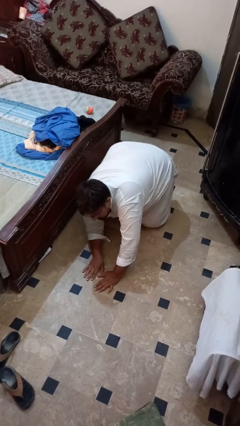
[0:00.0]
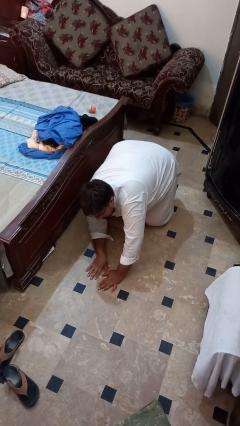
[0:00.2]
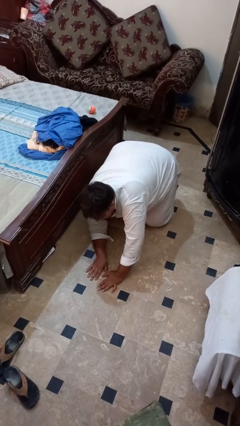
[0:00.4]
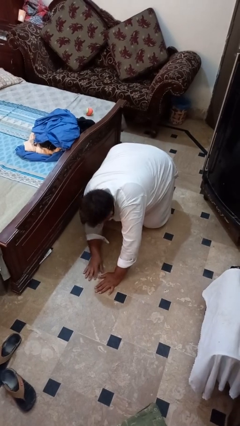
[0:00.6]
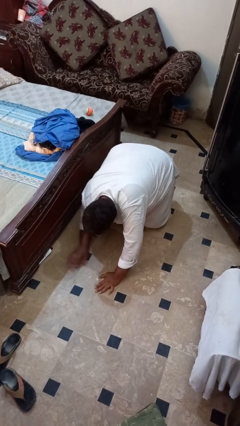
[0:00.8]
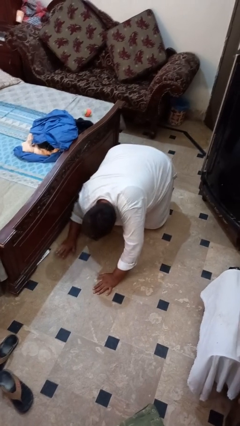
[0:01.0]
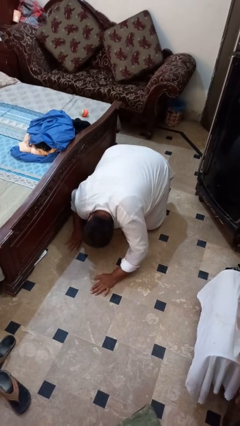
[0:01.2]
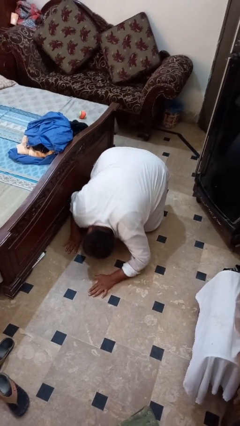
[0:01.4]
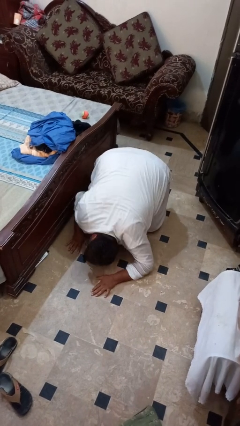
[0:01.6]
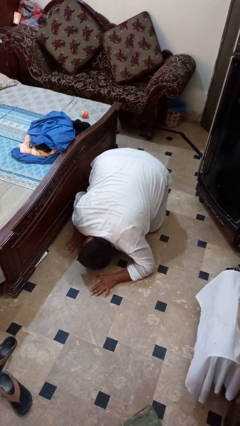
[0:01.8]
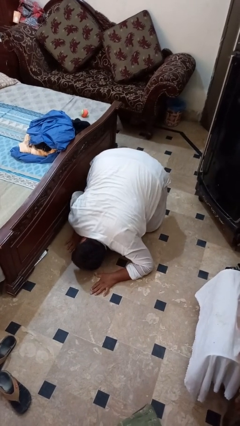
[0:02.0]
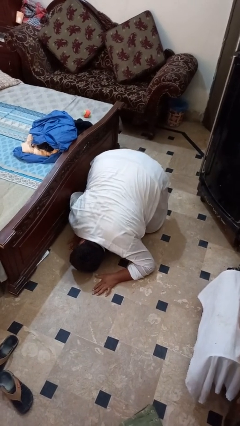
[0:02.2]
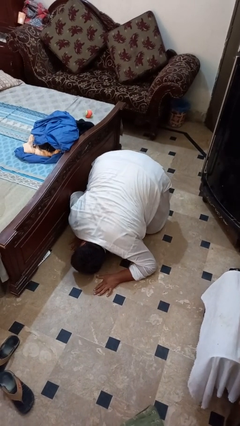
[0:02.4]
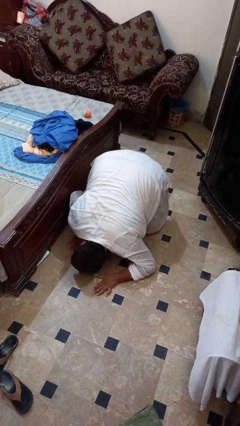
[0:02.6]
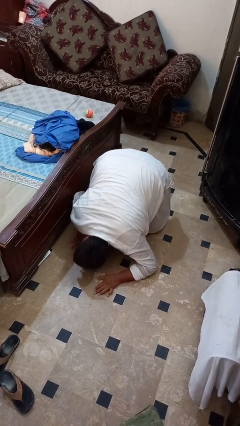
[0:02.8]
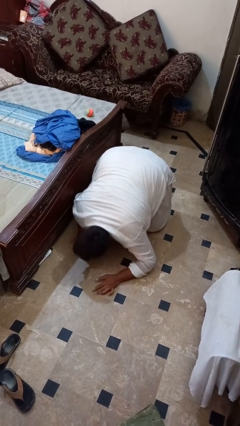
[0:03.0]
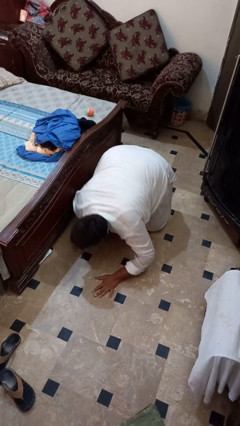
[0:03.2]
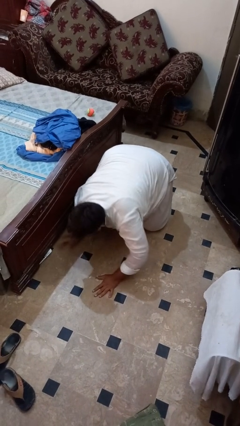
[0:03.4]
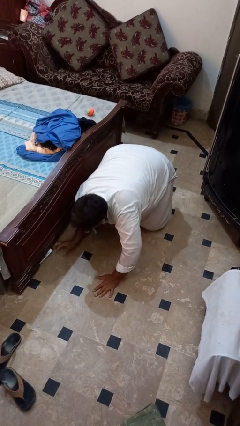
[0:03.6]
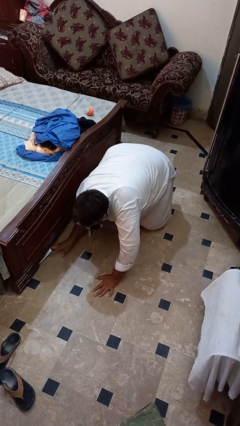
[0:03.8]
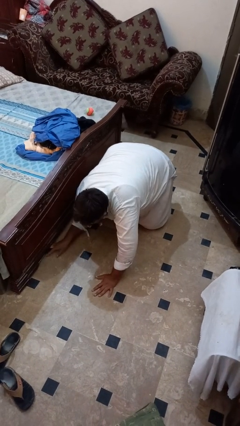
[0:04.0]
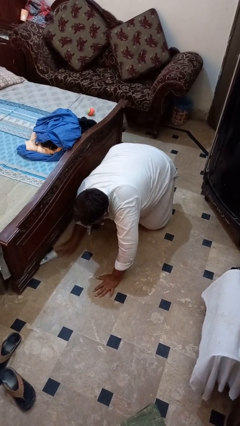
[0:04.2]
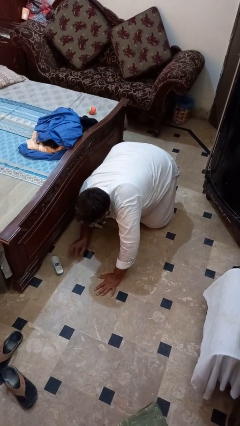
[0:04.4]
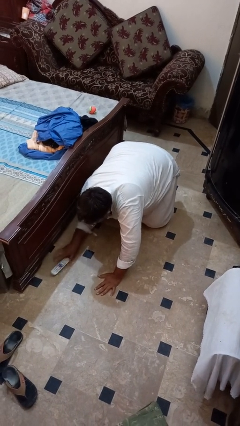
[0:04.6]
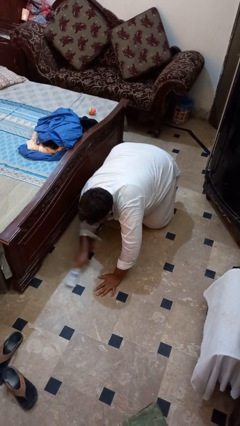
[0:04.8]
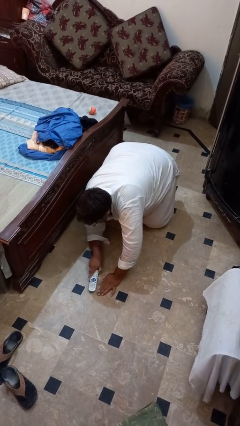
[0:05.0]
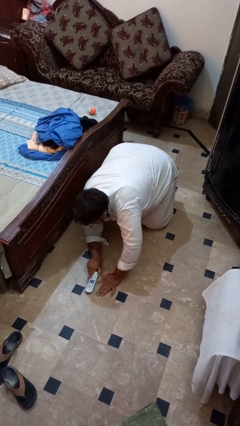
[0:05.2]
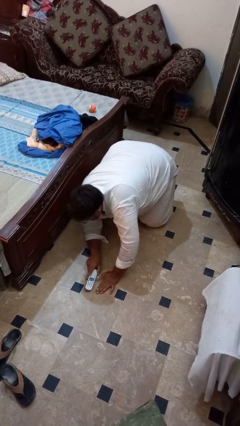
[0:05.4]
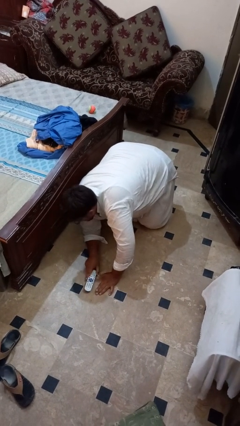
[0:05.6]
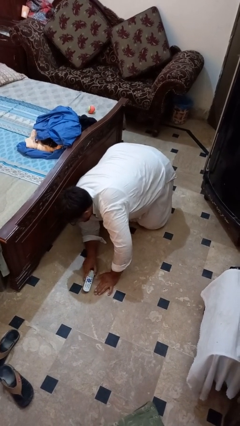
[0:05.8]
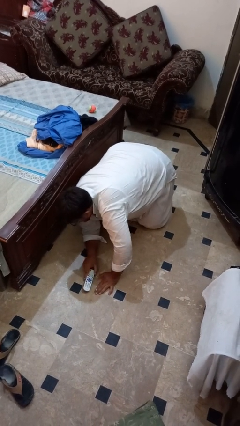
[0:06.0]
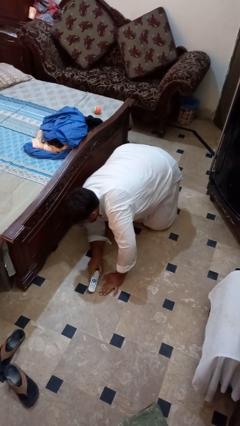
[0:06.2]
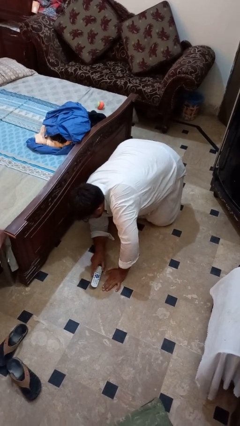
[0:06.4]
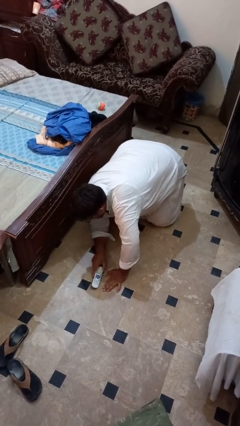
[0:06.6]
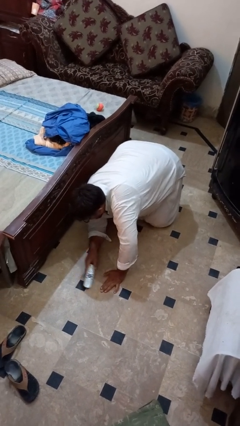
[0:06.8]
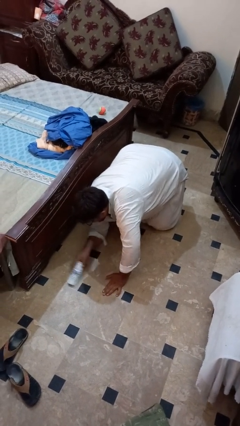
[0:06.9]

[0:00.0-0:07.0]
person searches under bed

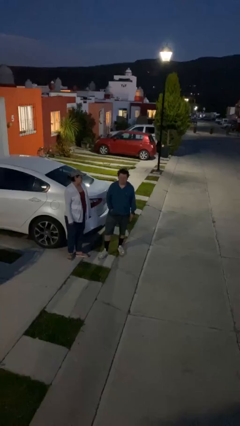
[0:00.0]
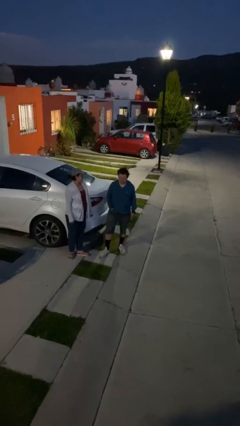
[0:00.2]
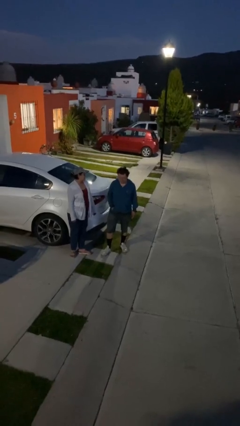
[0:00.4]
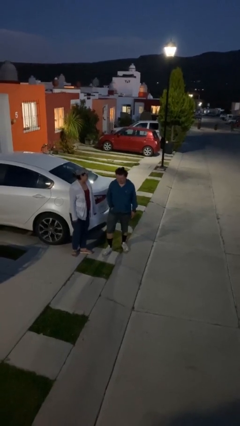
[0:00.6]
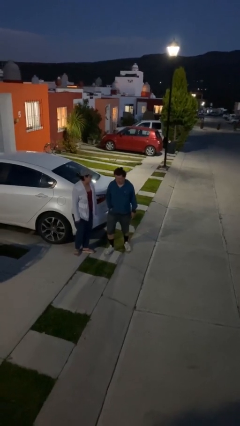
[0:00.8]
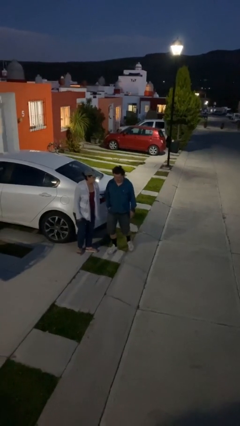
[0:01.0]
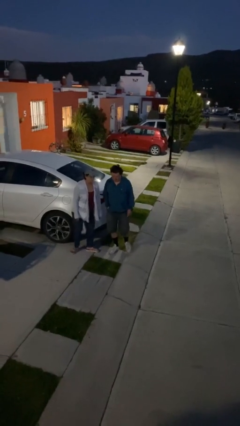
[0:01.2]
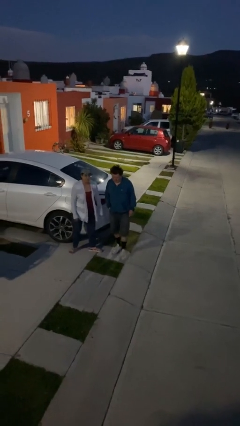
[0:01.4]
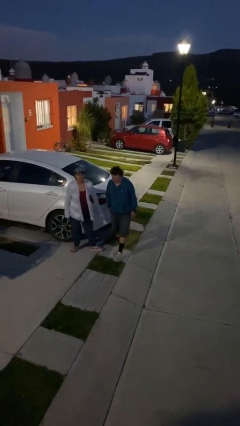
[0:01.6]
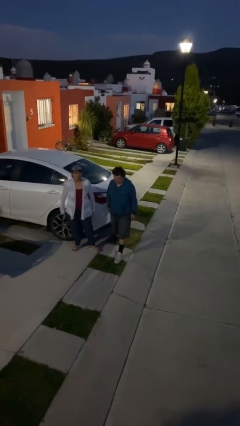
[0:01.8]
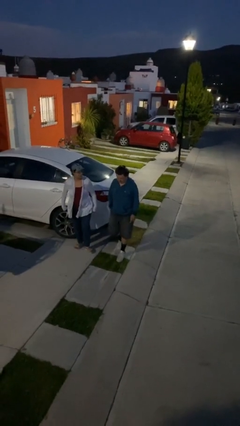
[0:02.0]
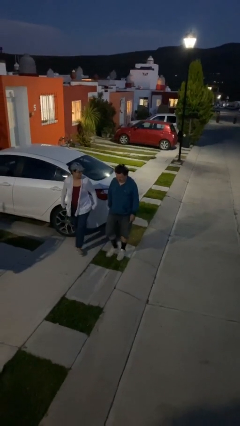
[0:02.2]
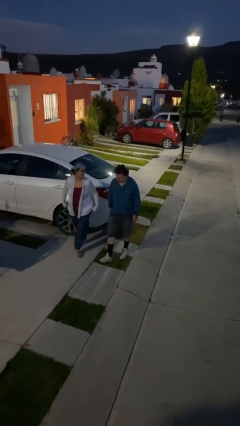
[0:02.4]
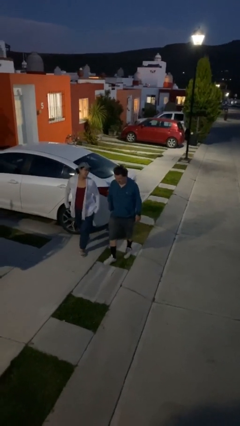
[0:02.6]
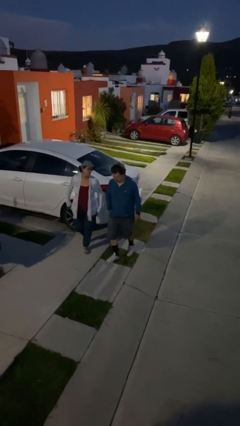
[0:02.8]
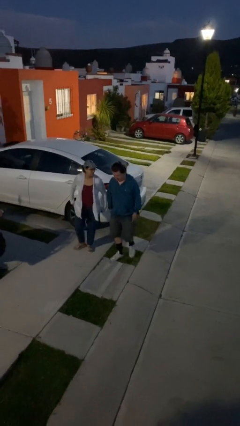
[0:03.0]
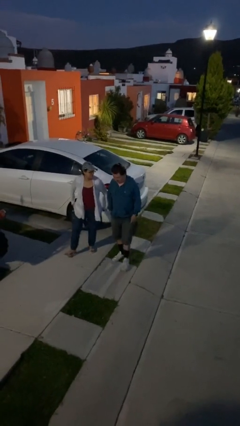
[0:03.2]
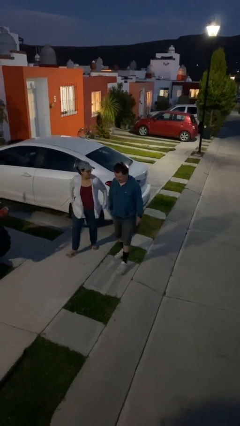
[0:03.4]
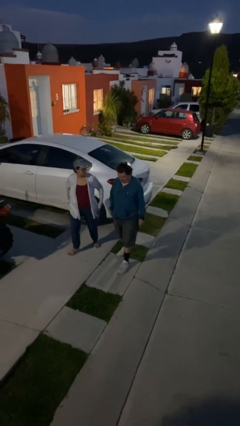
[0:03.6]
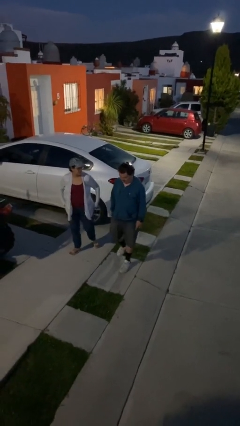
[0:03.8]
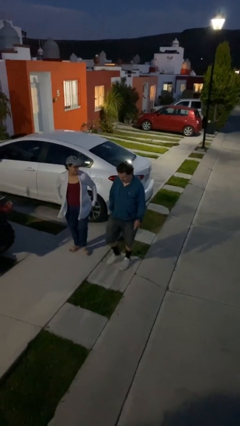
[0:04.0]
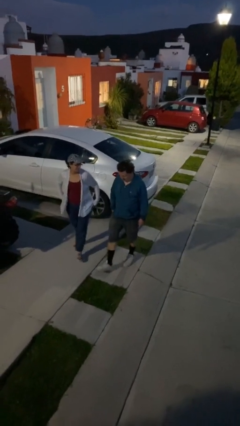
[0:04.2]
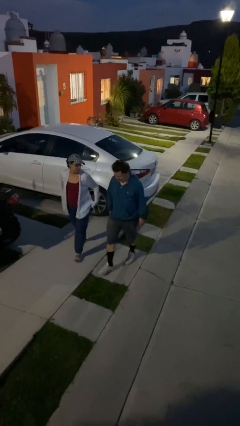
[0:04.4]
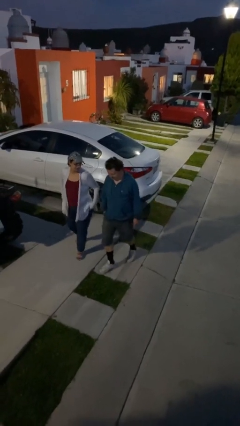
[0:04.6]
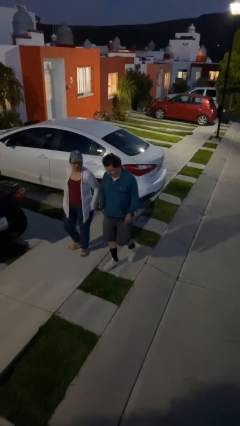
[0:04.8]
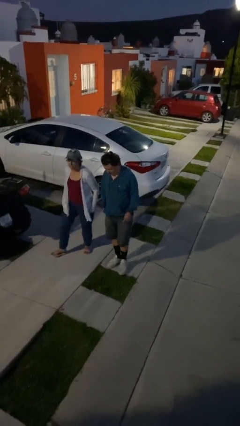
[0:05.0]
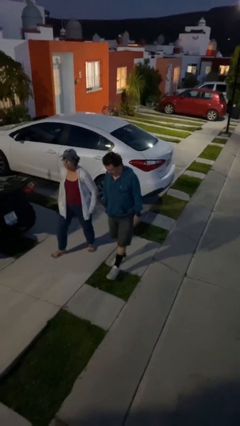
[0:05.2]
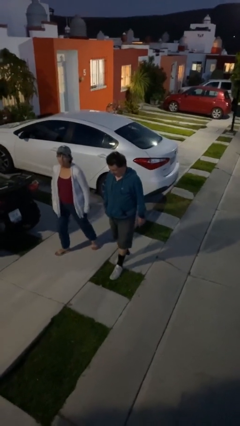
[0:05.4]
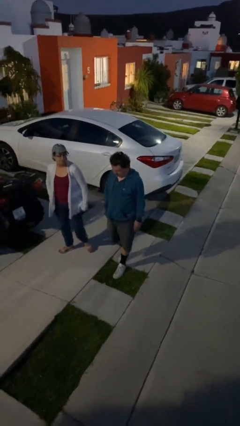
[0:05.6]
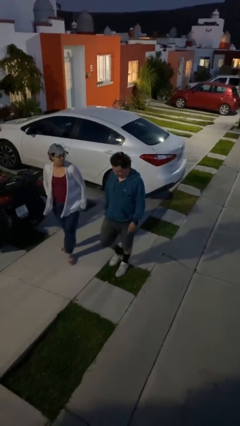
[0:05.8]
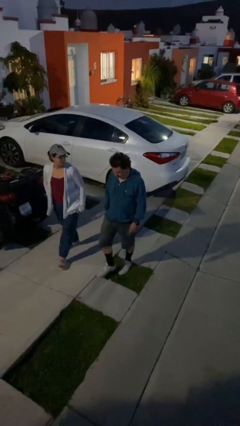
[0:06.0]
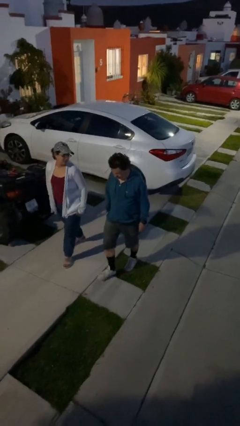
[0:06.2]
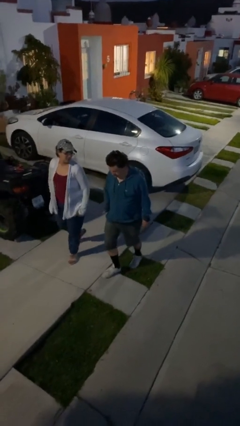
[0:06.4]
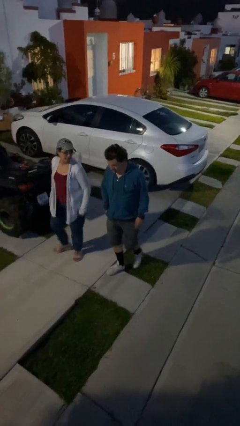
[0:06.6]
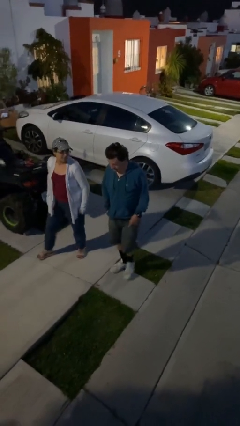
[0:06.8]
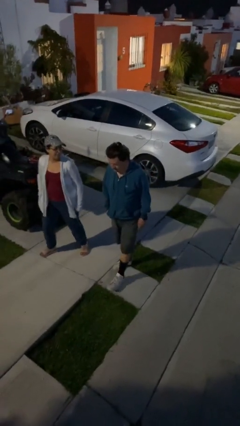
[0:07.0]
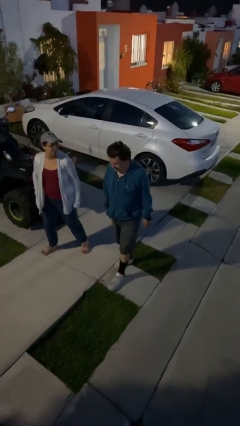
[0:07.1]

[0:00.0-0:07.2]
person talks to person

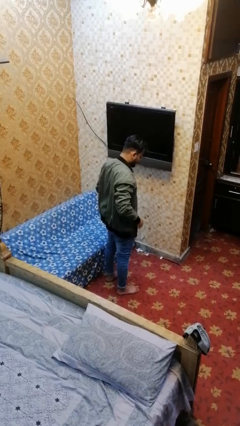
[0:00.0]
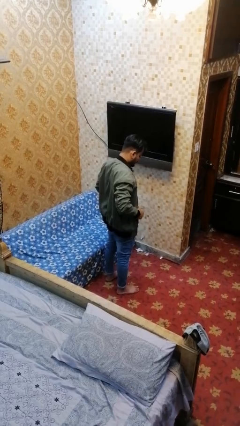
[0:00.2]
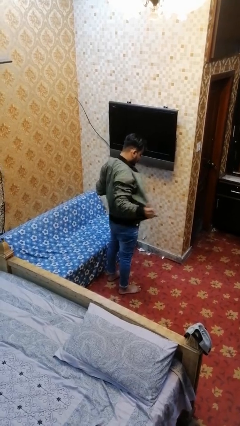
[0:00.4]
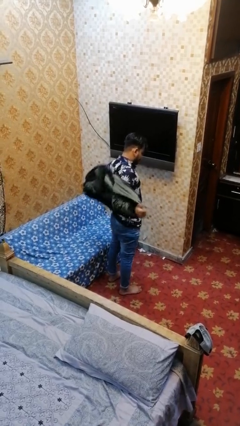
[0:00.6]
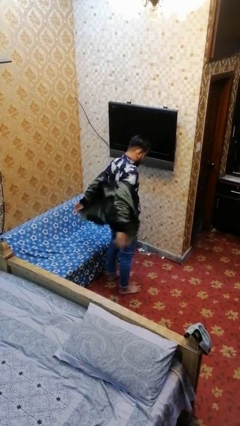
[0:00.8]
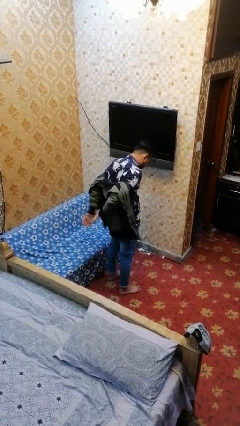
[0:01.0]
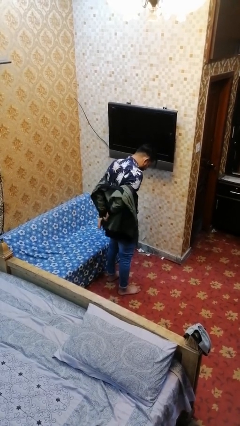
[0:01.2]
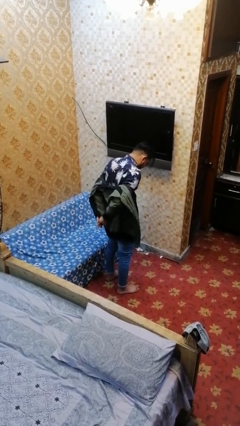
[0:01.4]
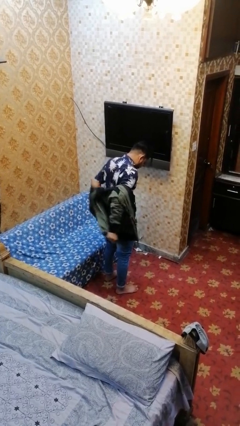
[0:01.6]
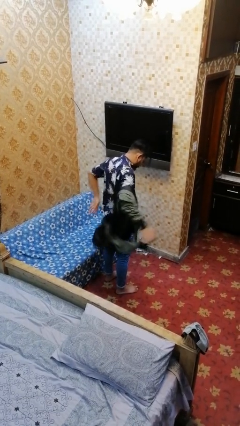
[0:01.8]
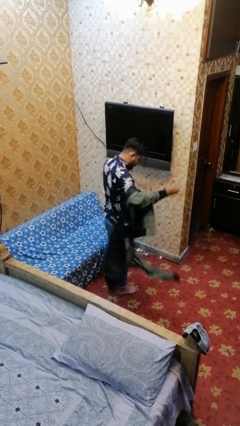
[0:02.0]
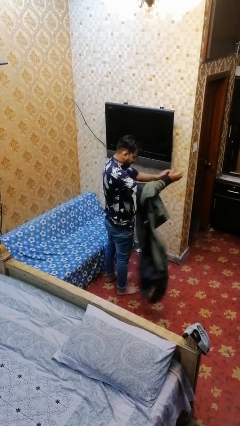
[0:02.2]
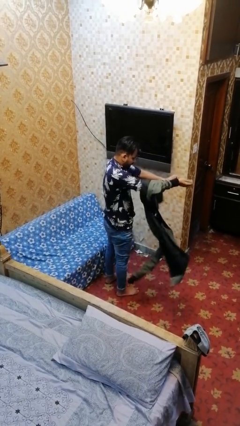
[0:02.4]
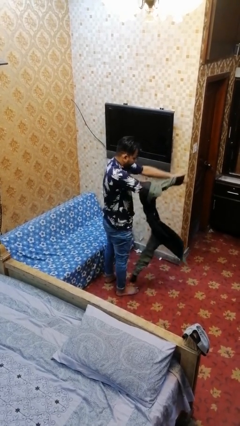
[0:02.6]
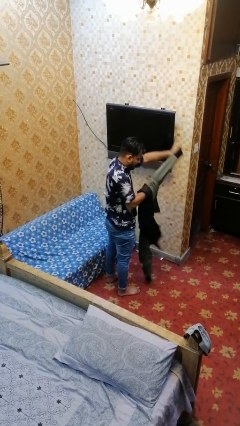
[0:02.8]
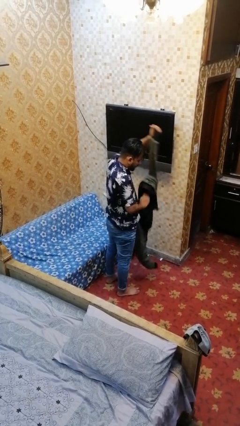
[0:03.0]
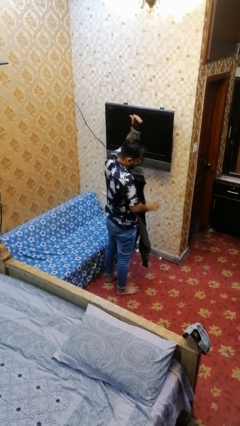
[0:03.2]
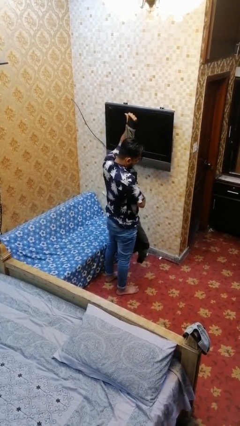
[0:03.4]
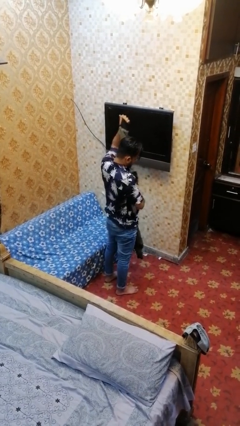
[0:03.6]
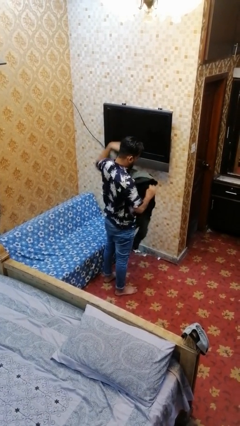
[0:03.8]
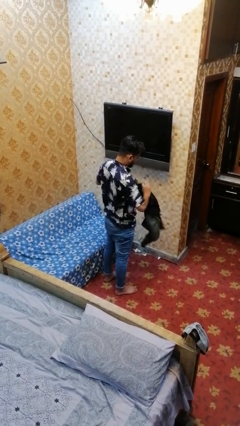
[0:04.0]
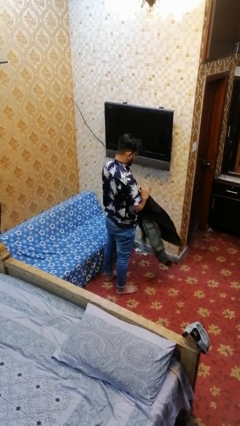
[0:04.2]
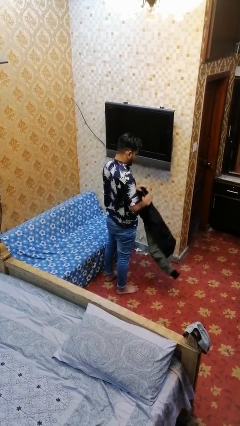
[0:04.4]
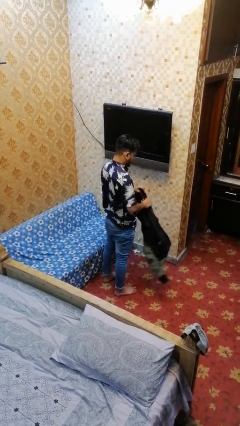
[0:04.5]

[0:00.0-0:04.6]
person takes off jacket
